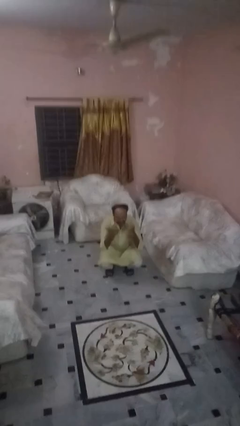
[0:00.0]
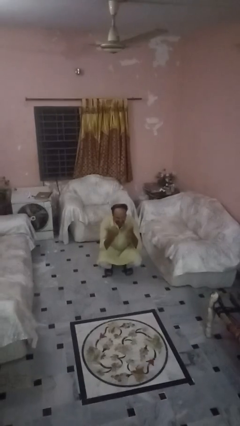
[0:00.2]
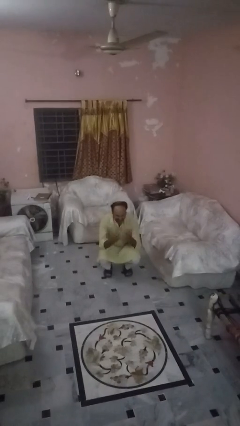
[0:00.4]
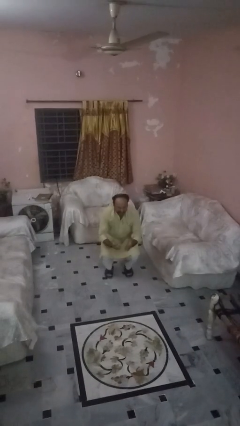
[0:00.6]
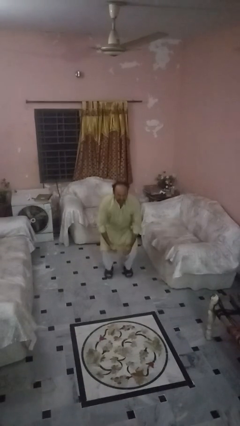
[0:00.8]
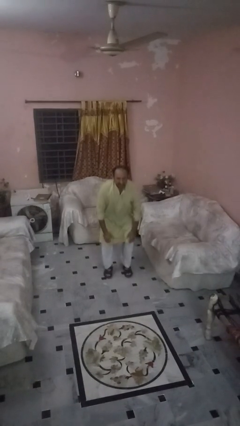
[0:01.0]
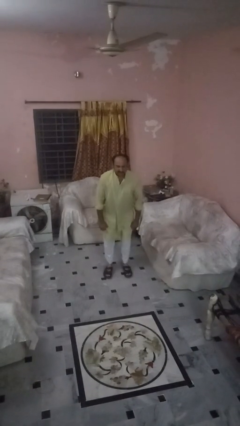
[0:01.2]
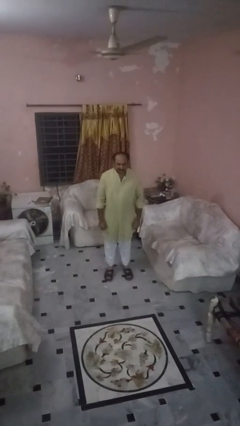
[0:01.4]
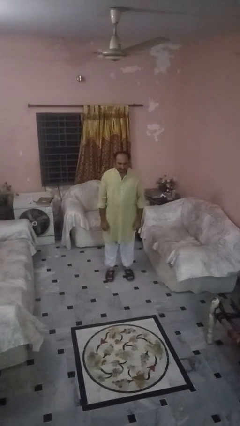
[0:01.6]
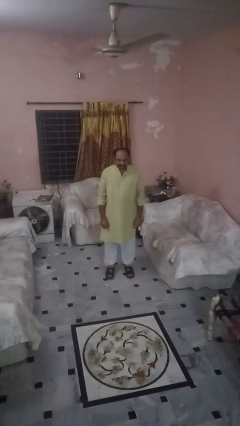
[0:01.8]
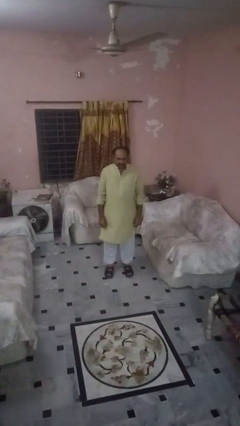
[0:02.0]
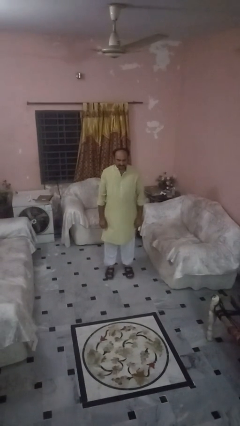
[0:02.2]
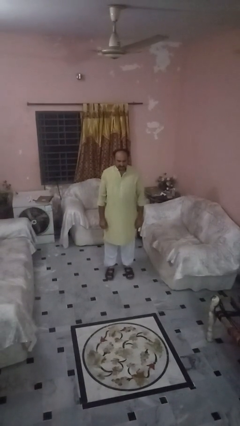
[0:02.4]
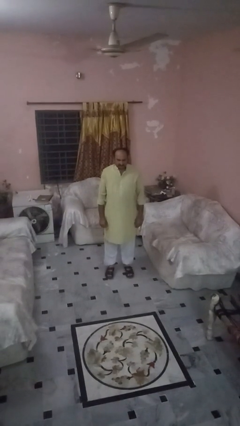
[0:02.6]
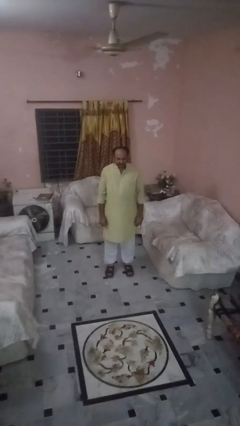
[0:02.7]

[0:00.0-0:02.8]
person stands up

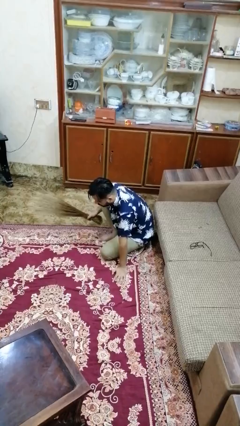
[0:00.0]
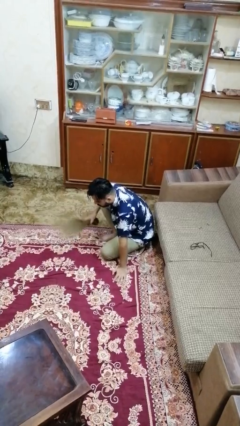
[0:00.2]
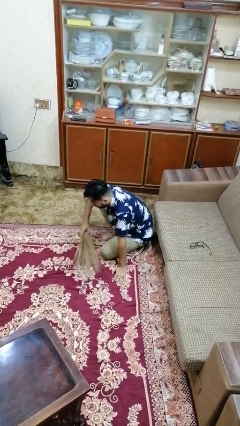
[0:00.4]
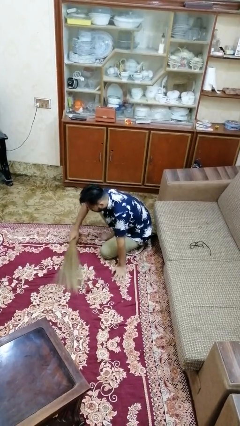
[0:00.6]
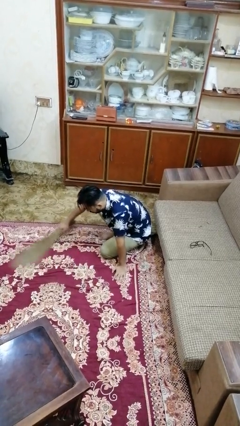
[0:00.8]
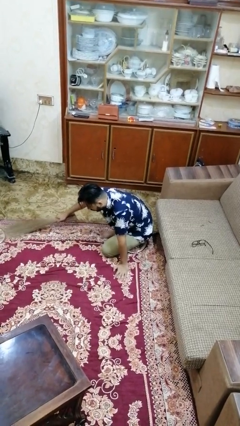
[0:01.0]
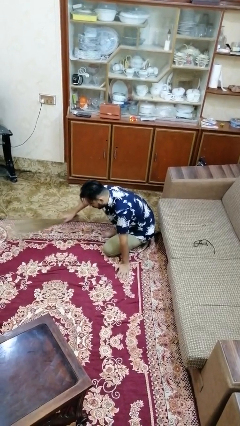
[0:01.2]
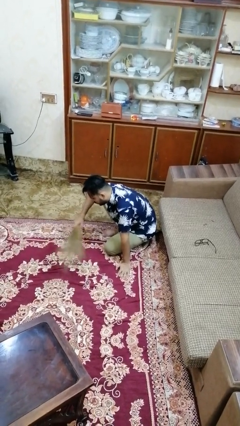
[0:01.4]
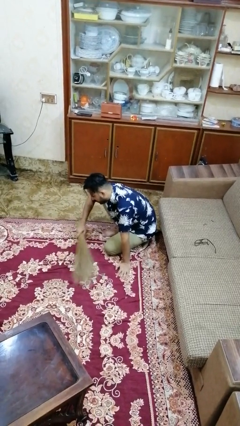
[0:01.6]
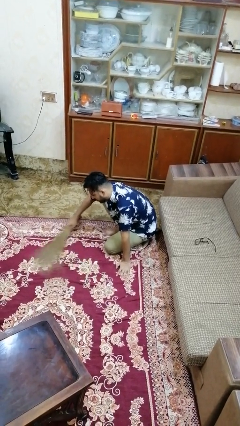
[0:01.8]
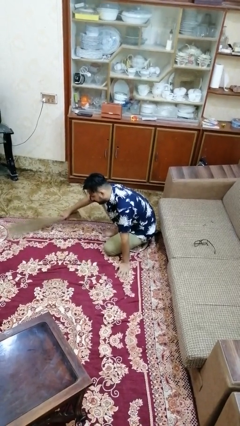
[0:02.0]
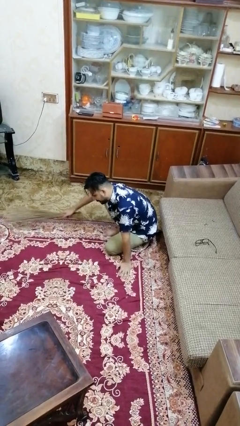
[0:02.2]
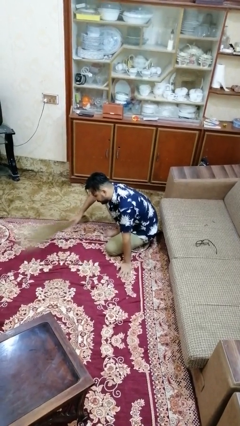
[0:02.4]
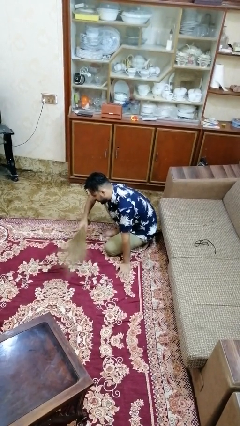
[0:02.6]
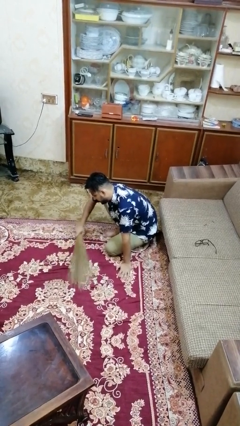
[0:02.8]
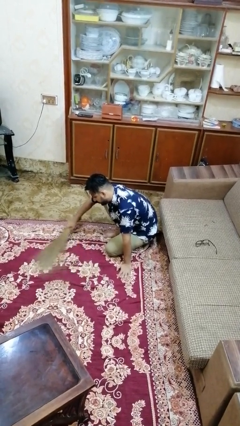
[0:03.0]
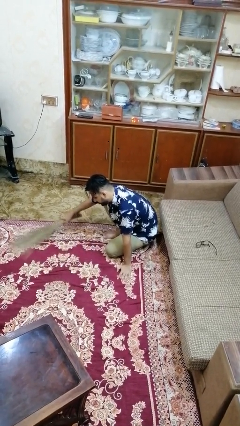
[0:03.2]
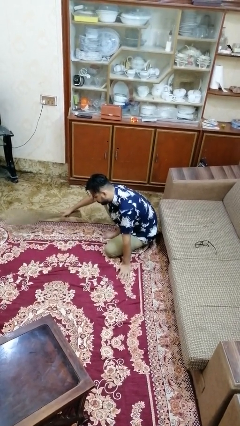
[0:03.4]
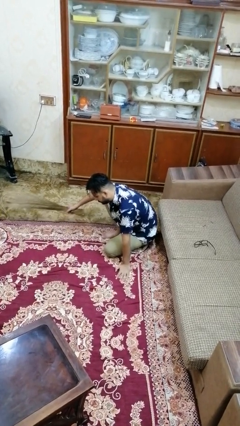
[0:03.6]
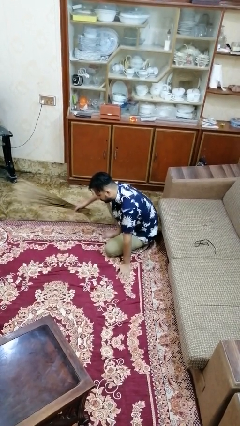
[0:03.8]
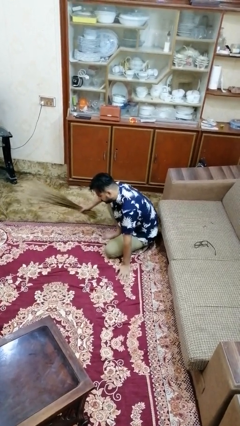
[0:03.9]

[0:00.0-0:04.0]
person sweeps floor

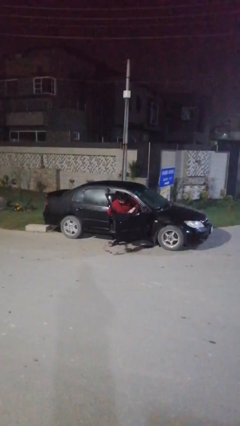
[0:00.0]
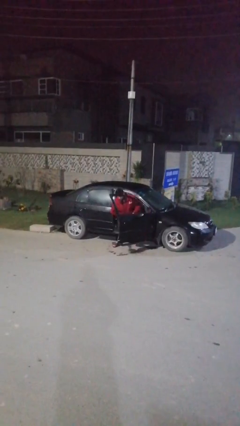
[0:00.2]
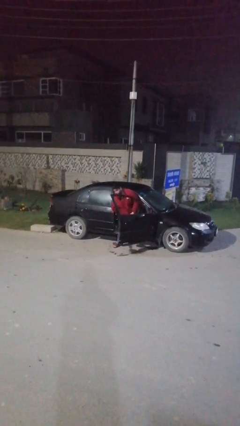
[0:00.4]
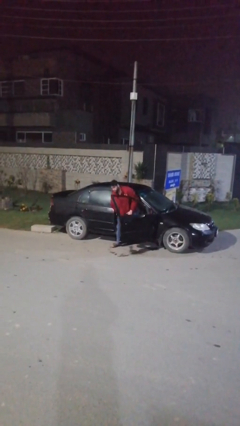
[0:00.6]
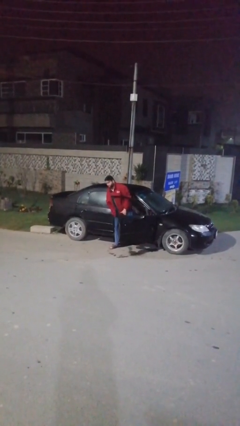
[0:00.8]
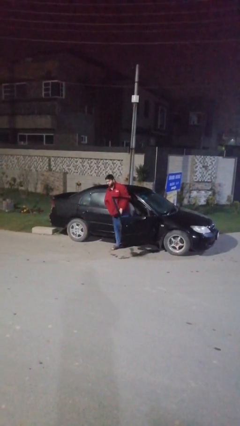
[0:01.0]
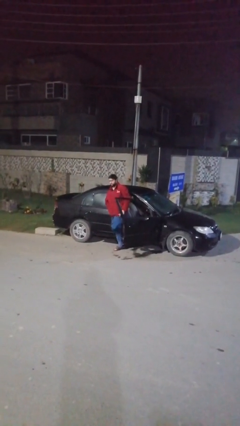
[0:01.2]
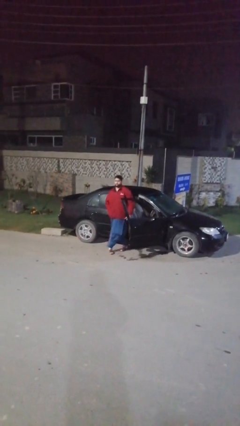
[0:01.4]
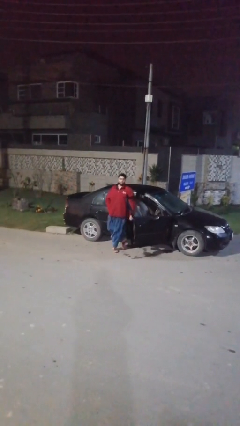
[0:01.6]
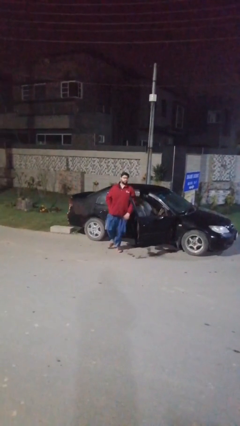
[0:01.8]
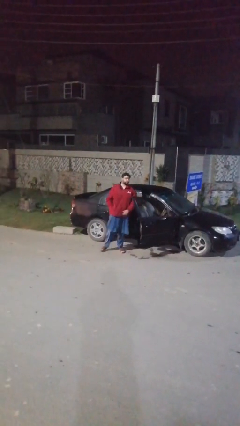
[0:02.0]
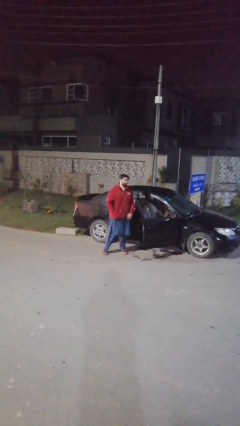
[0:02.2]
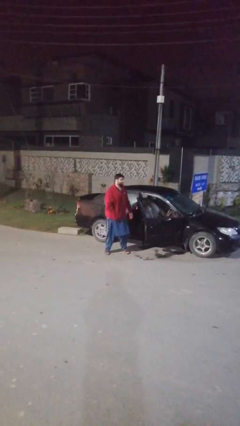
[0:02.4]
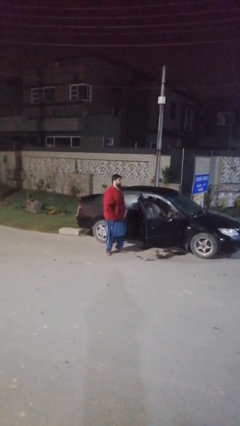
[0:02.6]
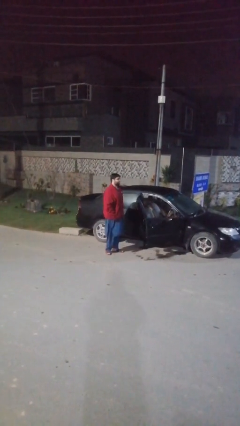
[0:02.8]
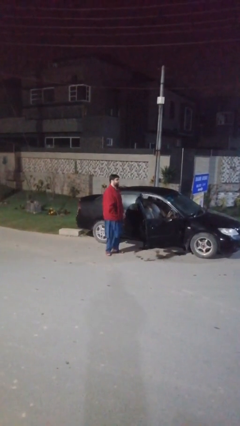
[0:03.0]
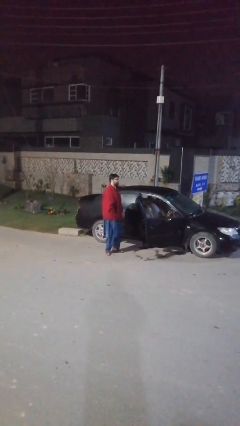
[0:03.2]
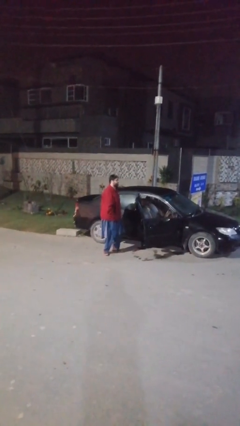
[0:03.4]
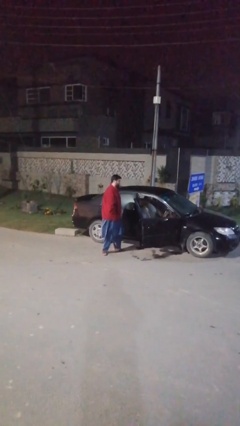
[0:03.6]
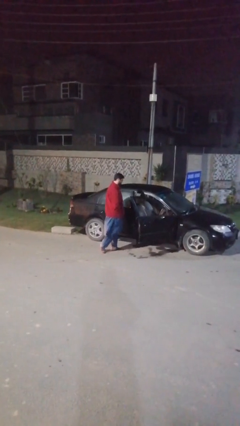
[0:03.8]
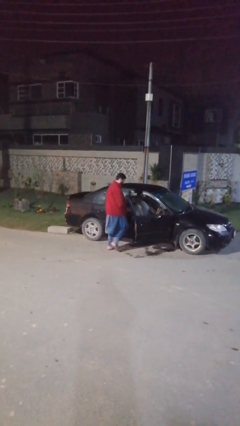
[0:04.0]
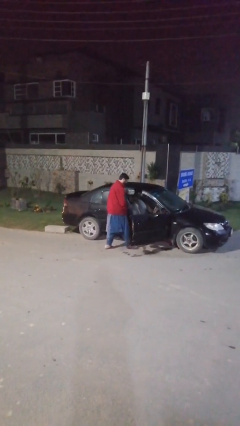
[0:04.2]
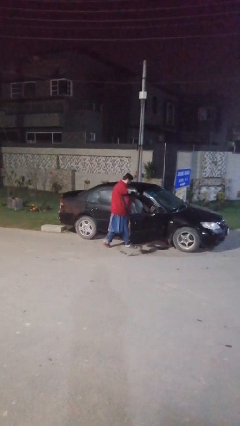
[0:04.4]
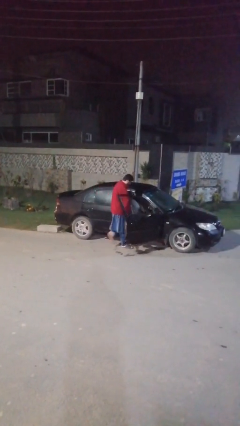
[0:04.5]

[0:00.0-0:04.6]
person exits car

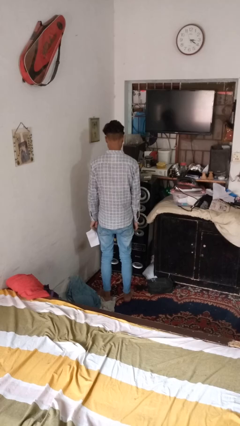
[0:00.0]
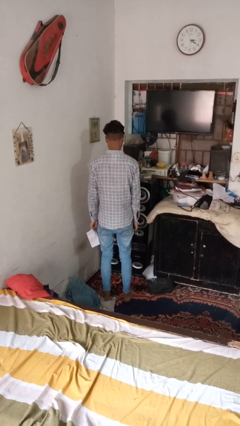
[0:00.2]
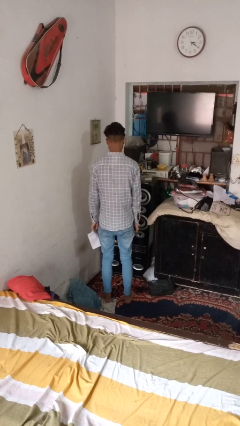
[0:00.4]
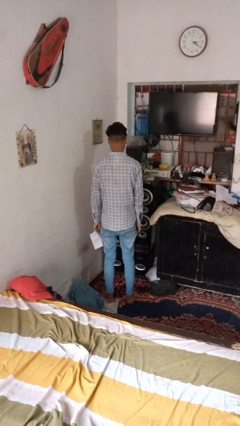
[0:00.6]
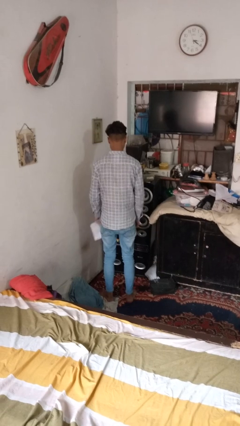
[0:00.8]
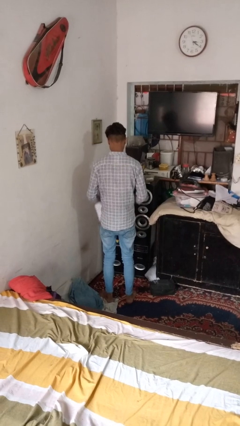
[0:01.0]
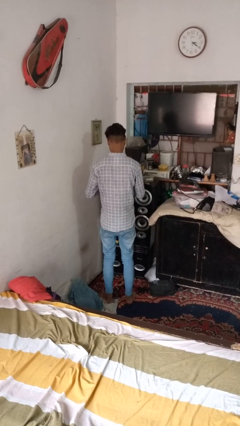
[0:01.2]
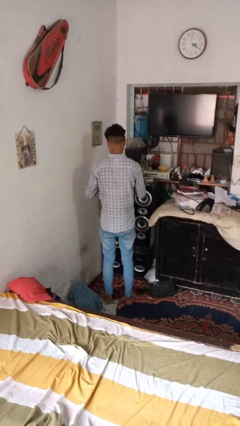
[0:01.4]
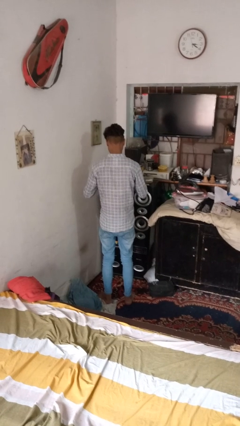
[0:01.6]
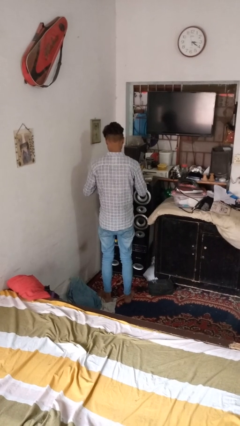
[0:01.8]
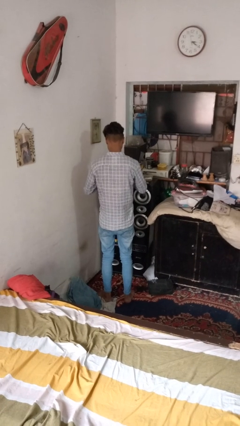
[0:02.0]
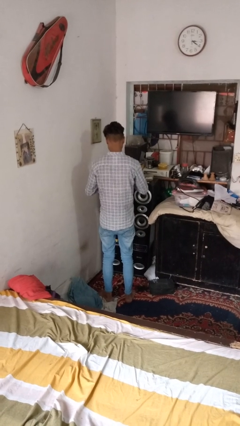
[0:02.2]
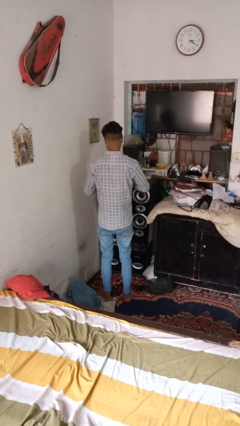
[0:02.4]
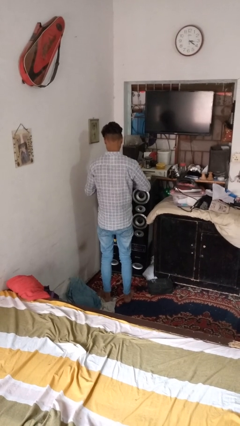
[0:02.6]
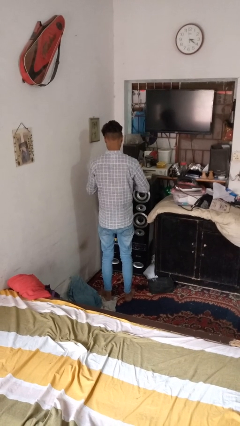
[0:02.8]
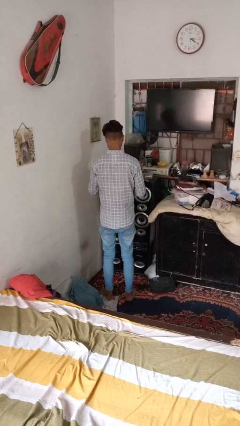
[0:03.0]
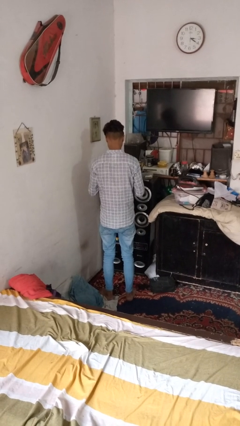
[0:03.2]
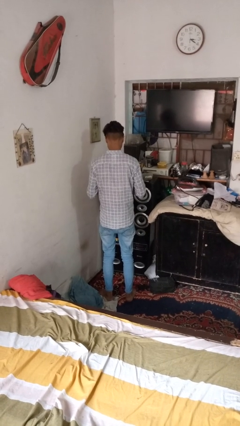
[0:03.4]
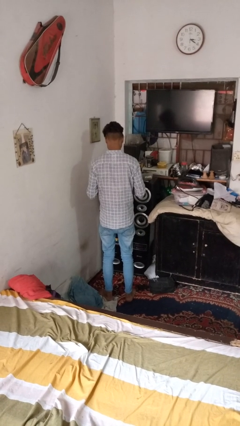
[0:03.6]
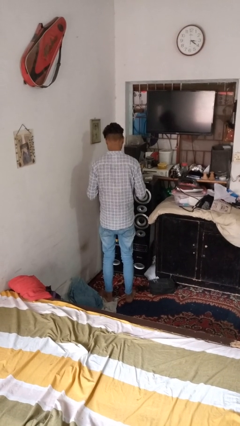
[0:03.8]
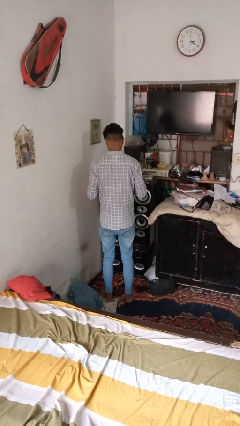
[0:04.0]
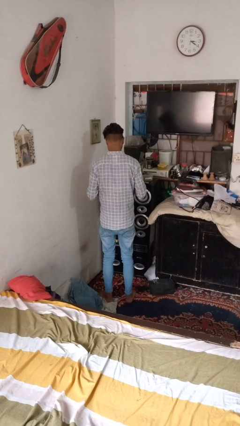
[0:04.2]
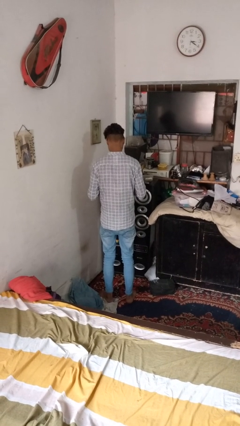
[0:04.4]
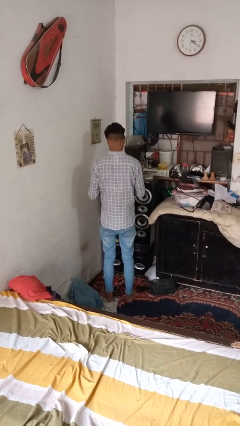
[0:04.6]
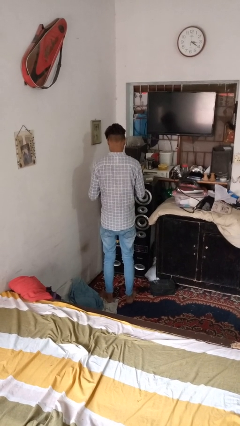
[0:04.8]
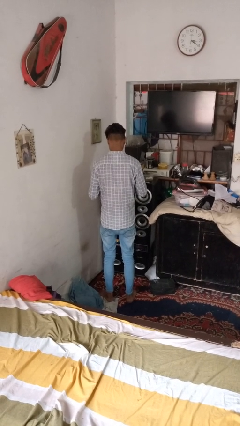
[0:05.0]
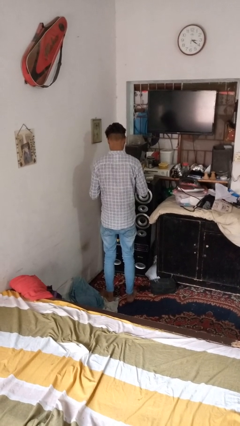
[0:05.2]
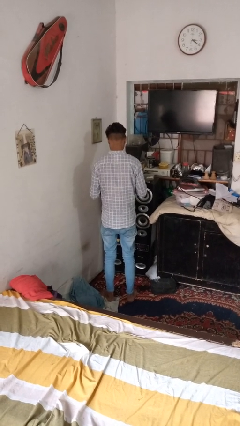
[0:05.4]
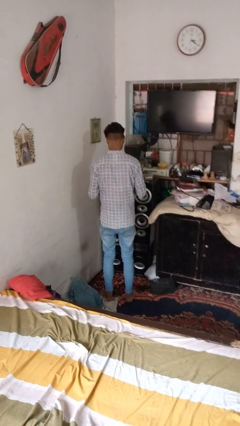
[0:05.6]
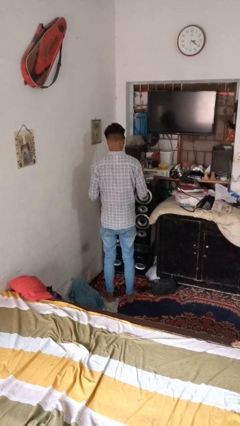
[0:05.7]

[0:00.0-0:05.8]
person tears paper
